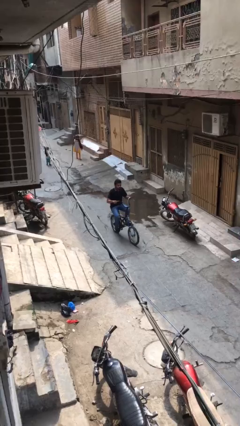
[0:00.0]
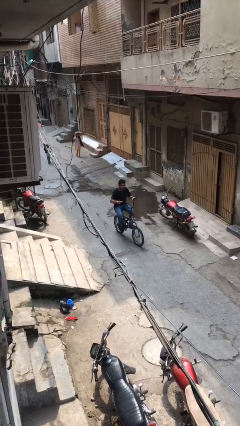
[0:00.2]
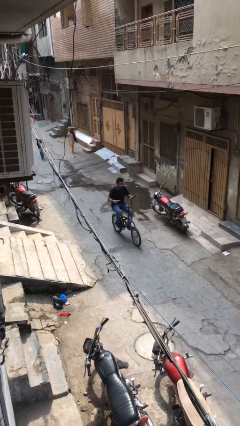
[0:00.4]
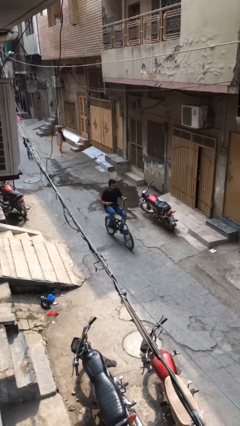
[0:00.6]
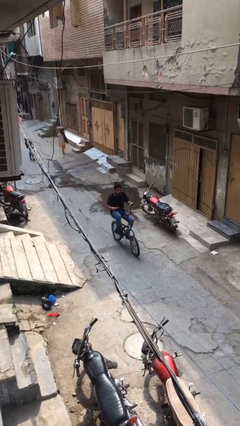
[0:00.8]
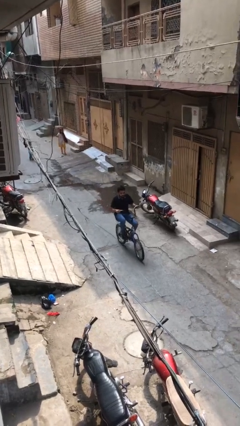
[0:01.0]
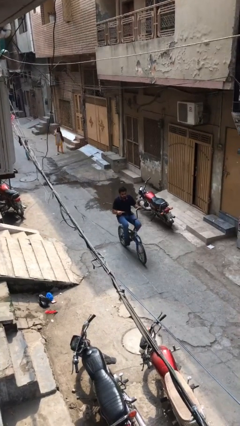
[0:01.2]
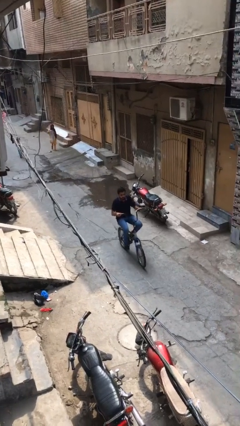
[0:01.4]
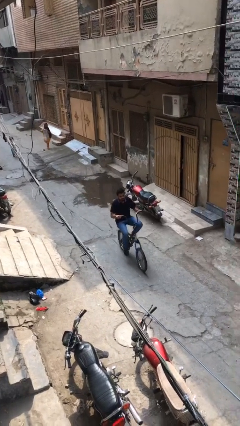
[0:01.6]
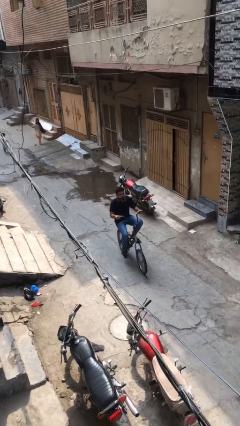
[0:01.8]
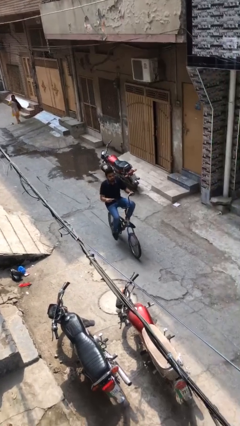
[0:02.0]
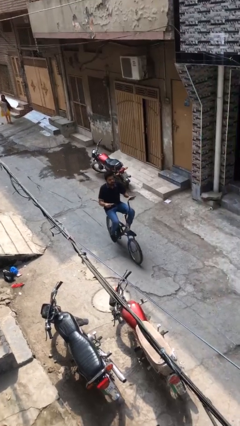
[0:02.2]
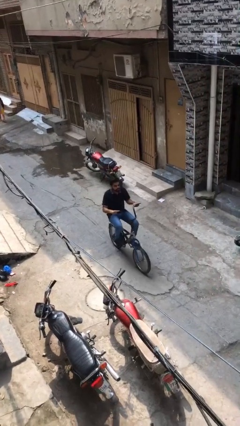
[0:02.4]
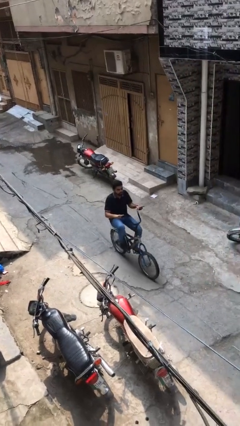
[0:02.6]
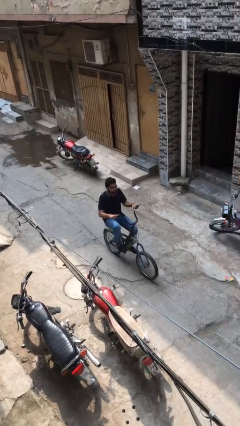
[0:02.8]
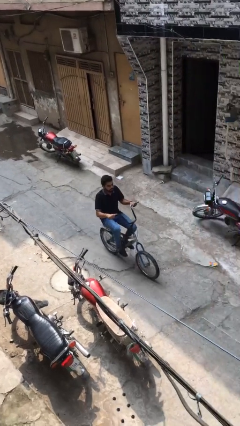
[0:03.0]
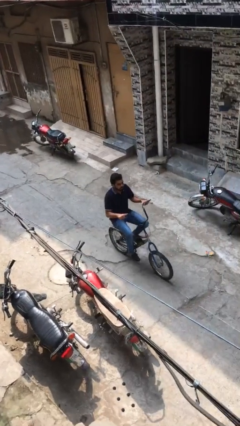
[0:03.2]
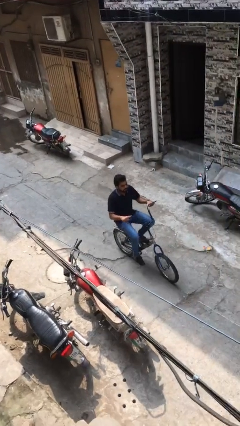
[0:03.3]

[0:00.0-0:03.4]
person rides bicycle

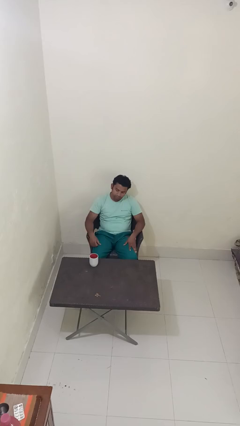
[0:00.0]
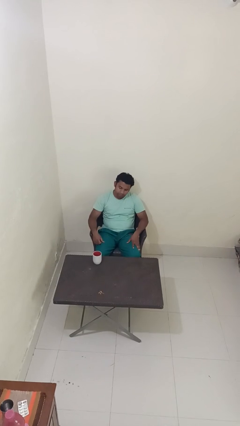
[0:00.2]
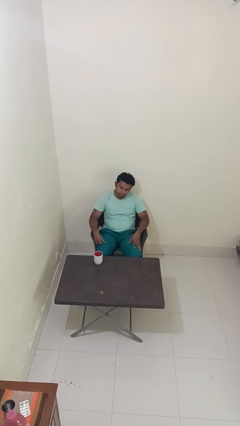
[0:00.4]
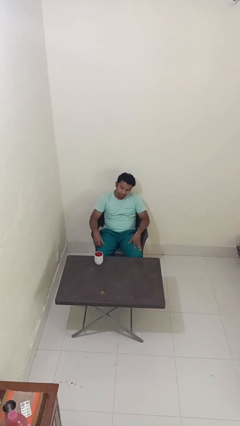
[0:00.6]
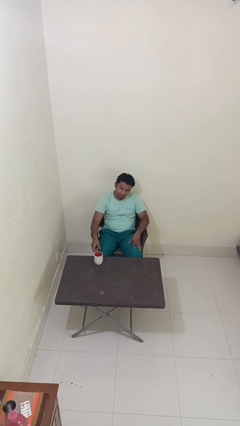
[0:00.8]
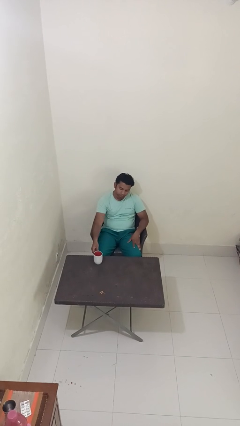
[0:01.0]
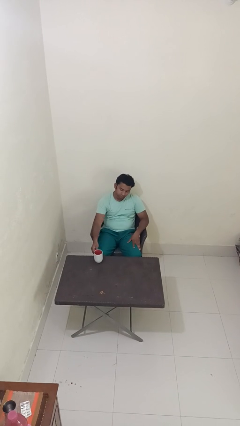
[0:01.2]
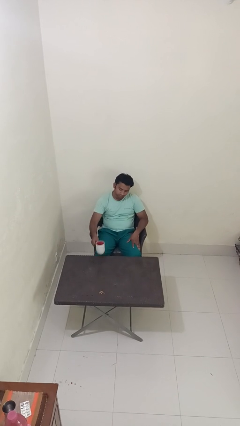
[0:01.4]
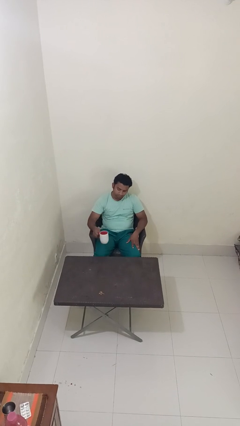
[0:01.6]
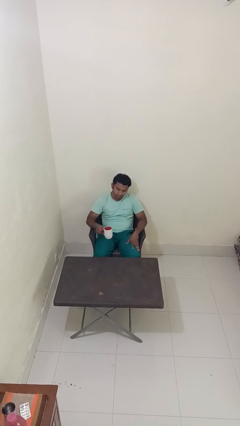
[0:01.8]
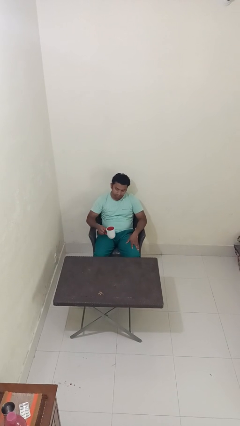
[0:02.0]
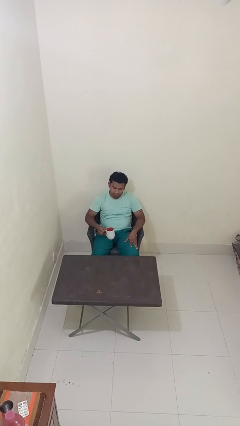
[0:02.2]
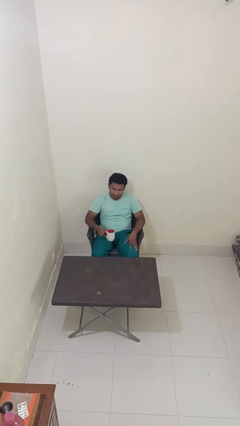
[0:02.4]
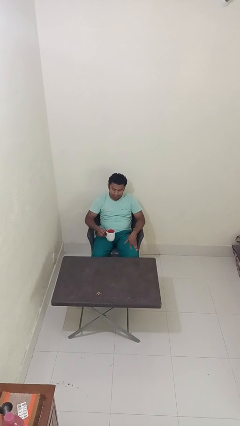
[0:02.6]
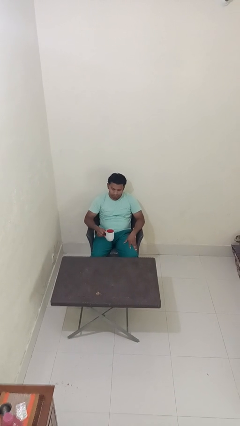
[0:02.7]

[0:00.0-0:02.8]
person picks up object from table

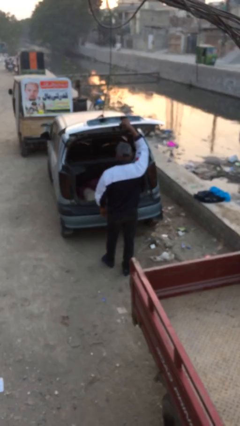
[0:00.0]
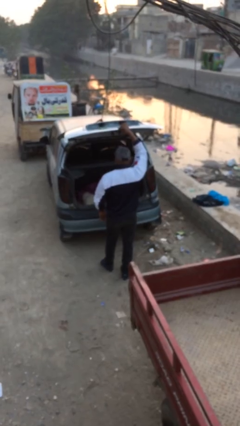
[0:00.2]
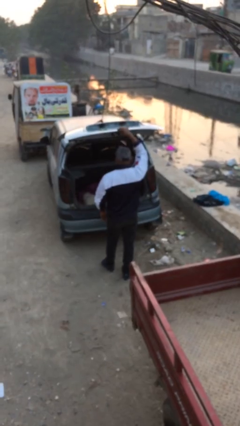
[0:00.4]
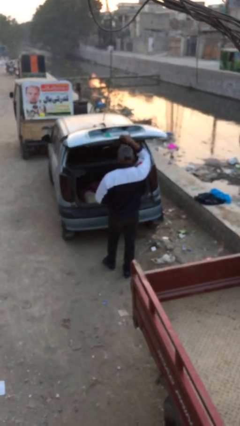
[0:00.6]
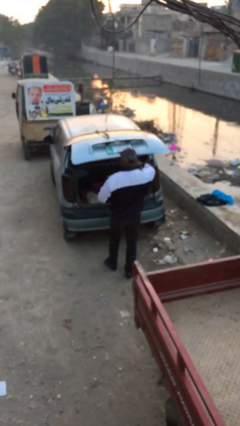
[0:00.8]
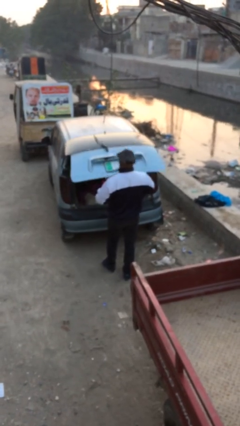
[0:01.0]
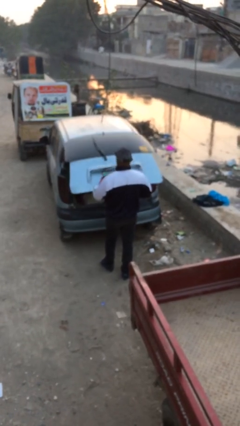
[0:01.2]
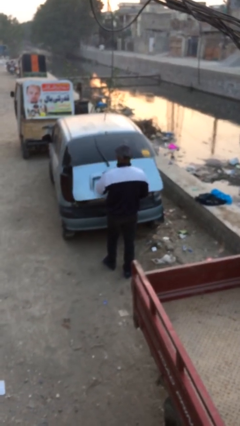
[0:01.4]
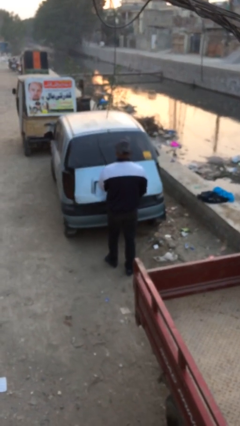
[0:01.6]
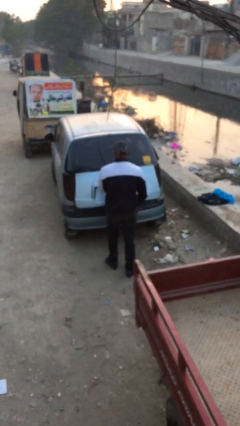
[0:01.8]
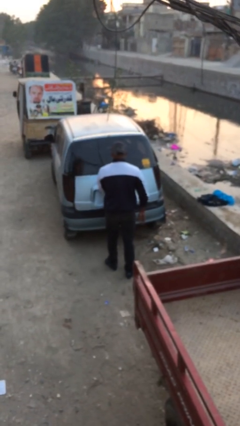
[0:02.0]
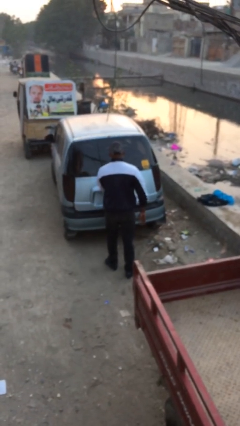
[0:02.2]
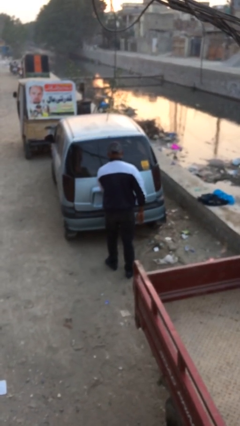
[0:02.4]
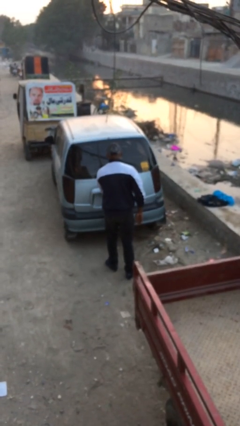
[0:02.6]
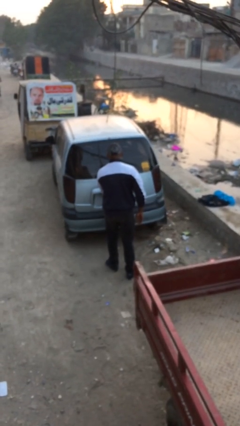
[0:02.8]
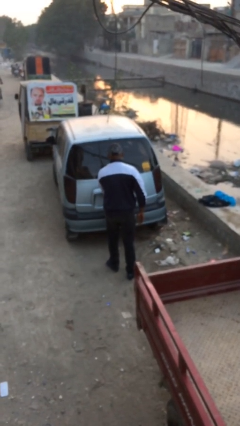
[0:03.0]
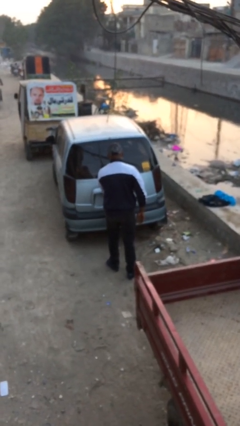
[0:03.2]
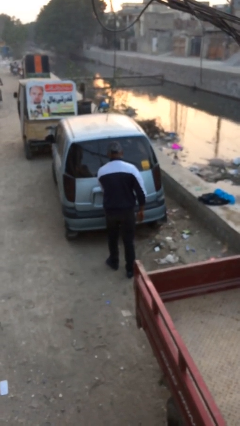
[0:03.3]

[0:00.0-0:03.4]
person closes car trunk

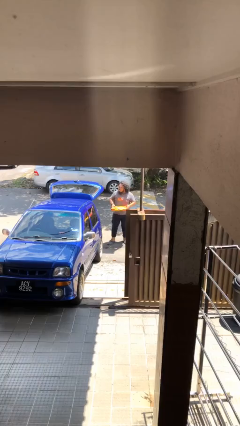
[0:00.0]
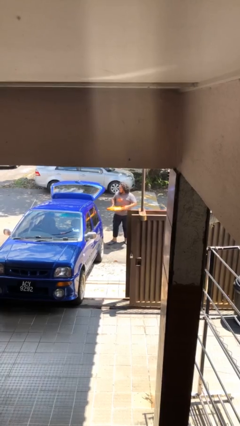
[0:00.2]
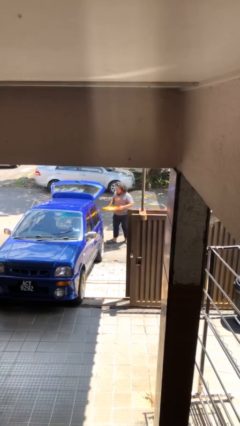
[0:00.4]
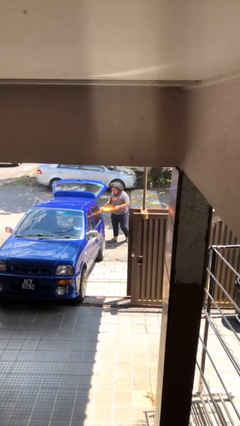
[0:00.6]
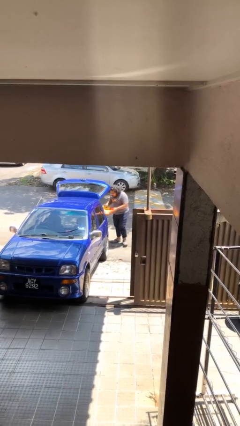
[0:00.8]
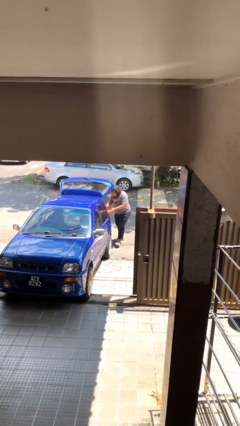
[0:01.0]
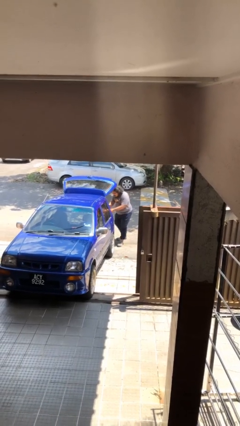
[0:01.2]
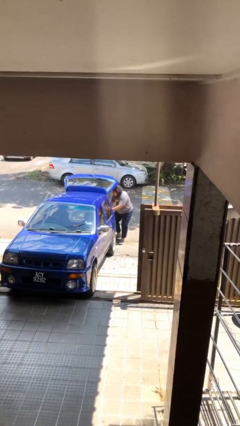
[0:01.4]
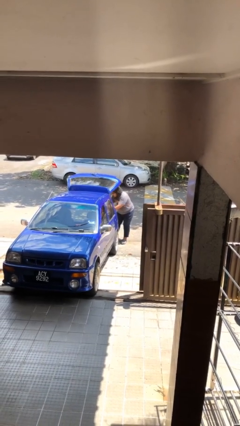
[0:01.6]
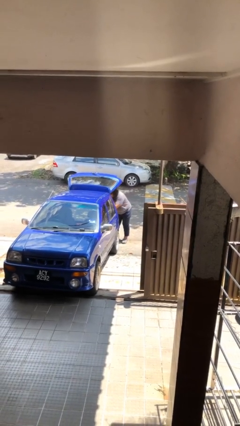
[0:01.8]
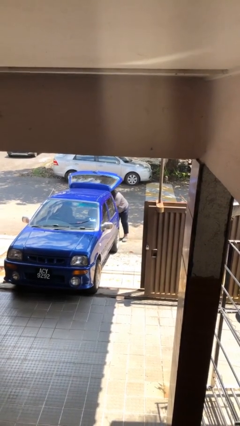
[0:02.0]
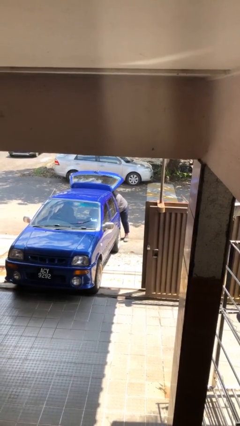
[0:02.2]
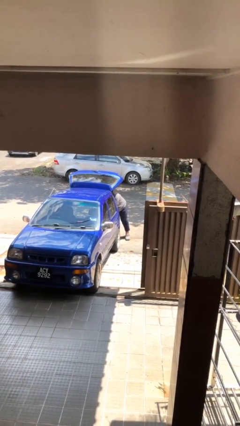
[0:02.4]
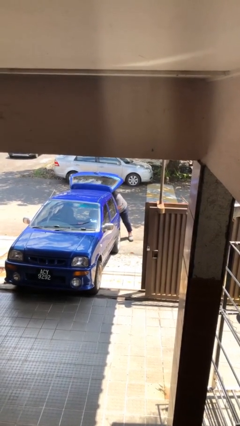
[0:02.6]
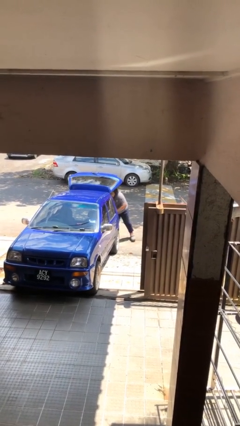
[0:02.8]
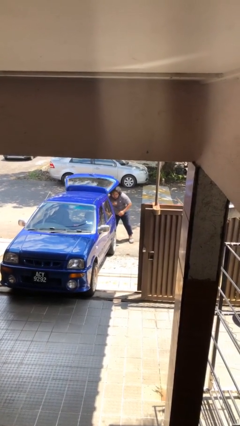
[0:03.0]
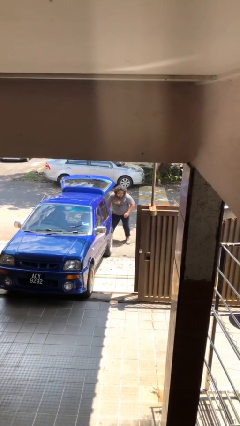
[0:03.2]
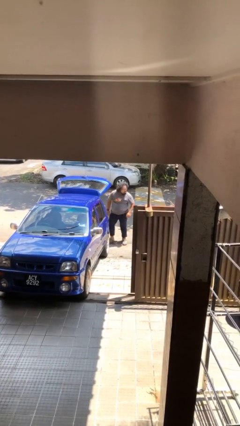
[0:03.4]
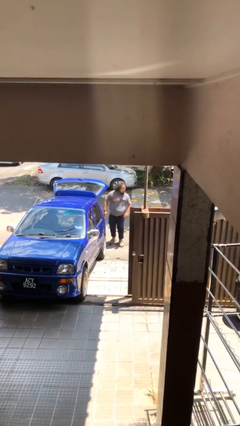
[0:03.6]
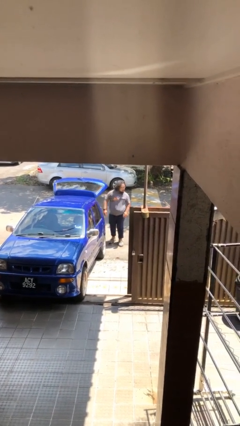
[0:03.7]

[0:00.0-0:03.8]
person loads car

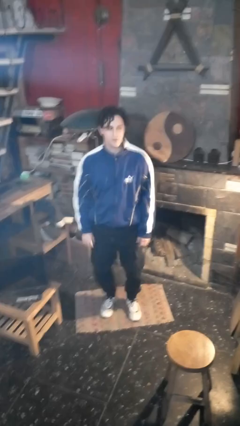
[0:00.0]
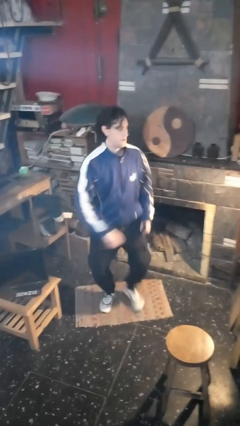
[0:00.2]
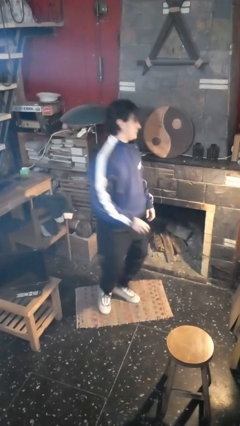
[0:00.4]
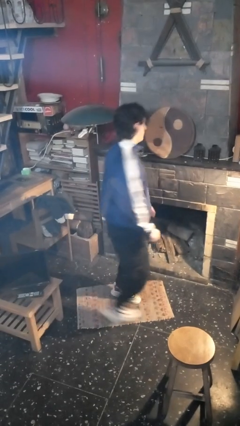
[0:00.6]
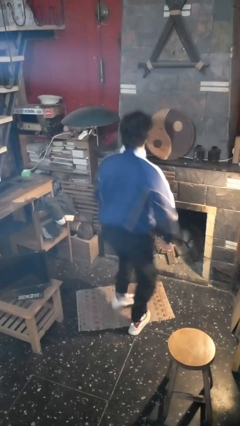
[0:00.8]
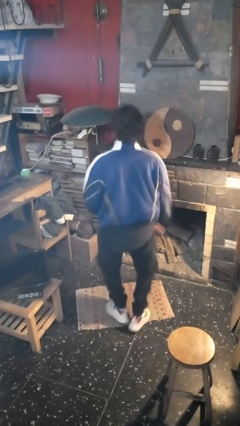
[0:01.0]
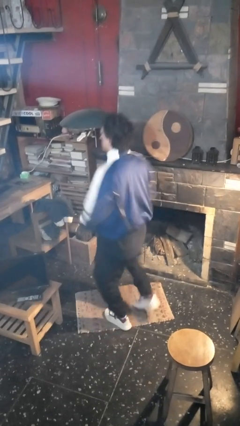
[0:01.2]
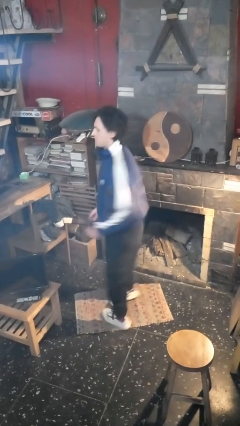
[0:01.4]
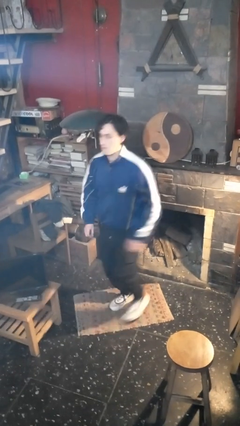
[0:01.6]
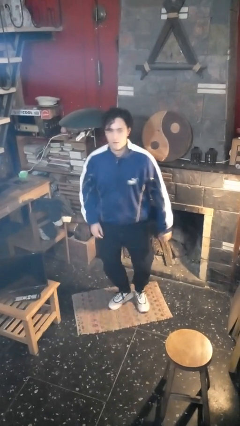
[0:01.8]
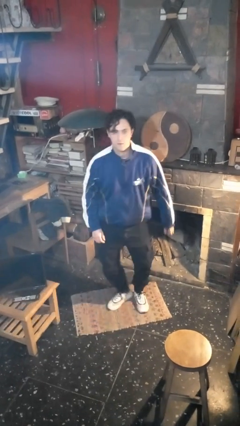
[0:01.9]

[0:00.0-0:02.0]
person twirls

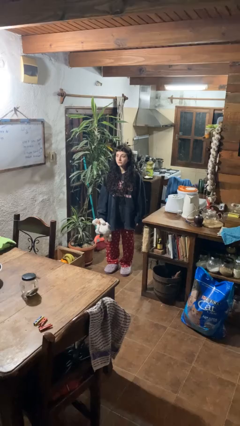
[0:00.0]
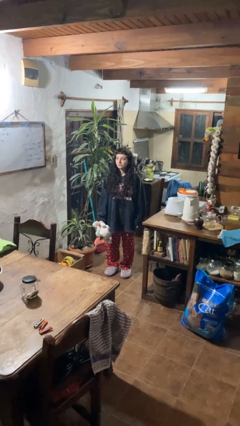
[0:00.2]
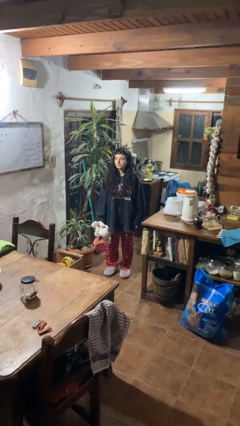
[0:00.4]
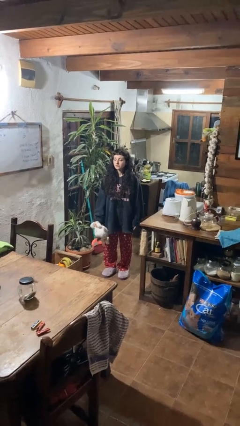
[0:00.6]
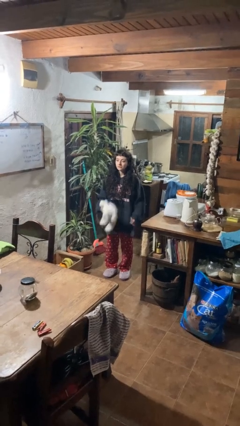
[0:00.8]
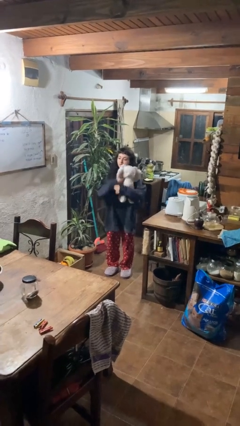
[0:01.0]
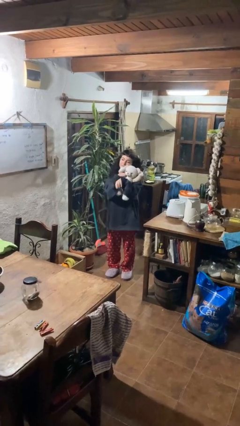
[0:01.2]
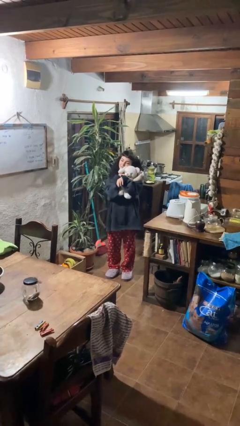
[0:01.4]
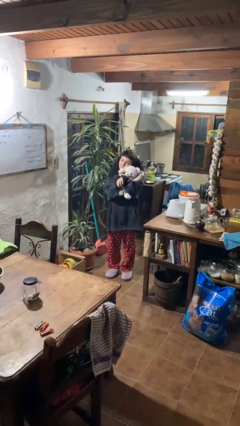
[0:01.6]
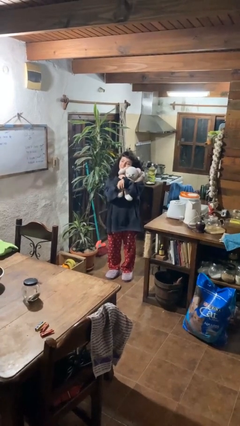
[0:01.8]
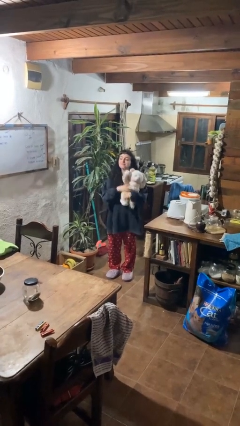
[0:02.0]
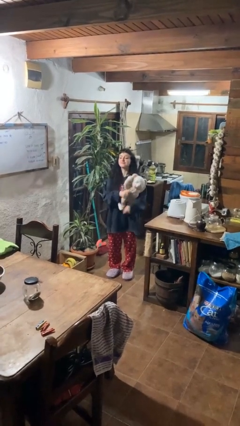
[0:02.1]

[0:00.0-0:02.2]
person hugs stuffed animal
